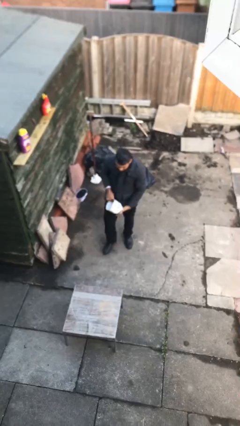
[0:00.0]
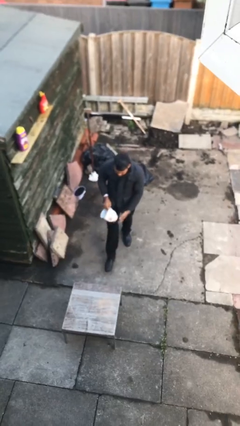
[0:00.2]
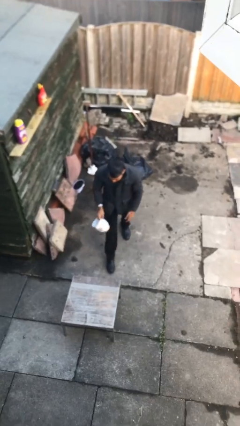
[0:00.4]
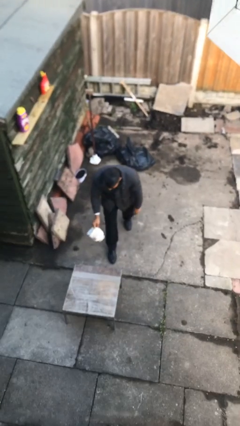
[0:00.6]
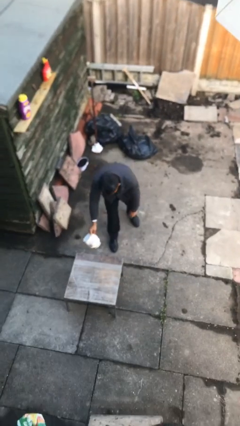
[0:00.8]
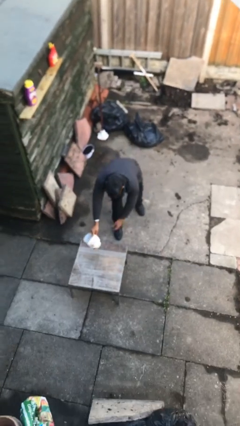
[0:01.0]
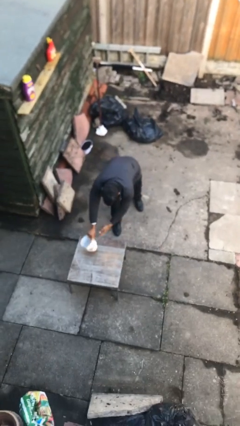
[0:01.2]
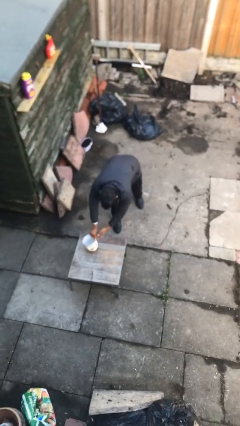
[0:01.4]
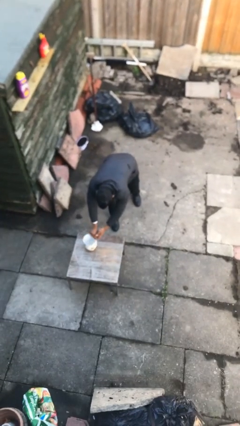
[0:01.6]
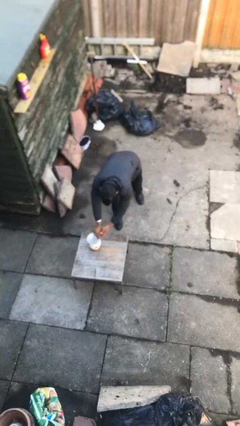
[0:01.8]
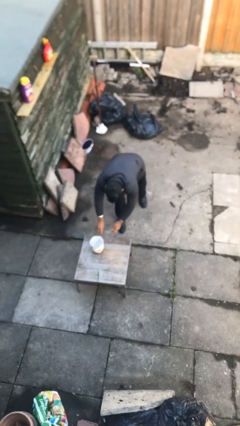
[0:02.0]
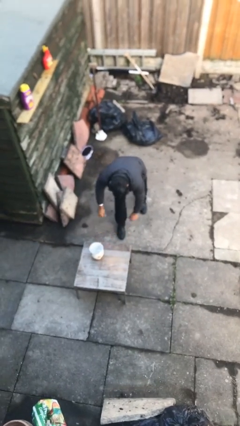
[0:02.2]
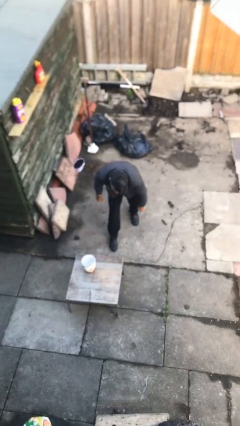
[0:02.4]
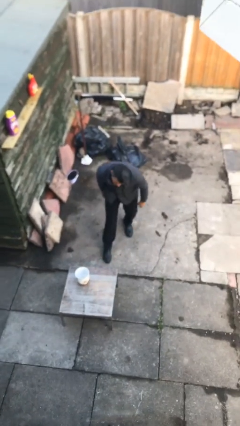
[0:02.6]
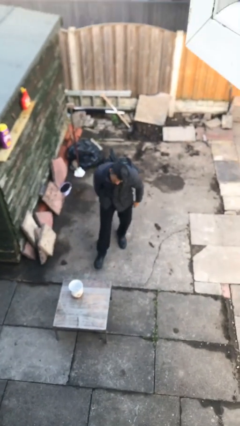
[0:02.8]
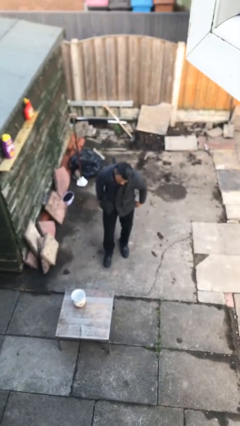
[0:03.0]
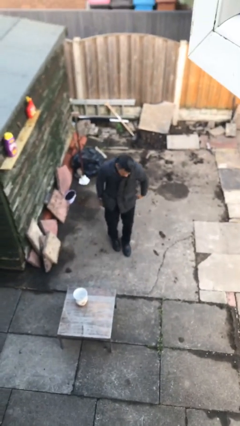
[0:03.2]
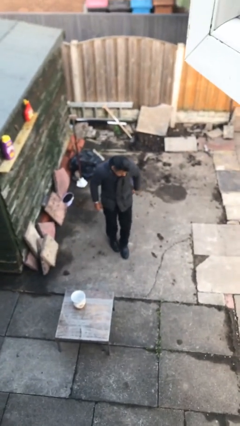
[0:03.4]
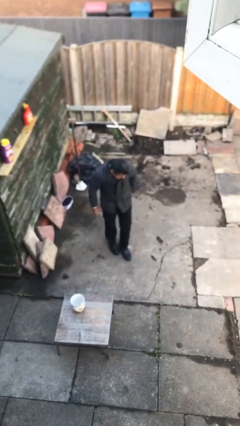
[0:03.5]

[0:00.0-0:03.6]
person puts down object on table

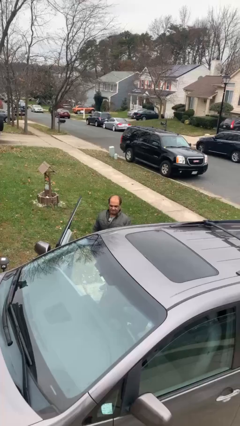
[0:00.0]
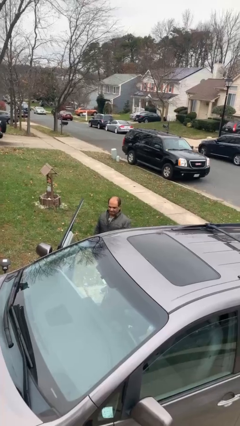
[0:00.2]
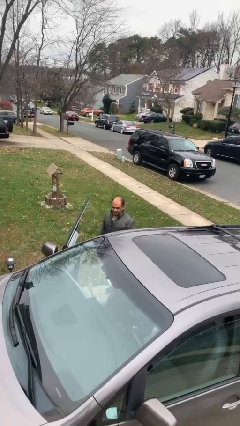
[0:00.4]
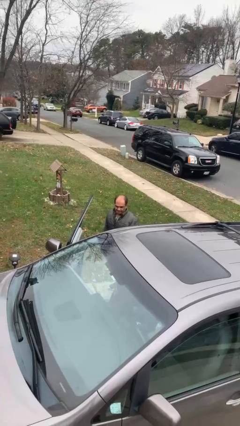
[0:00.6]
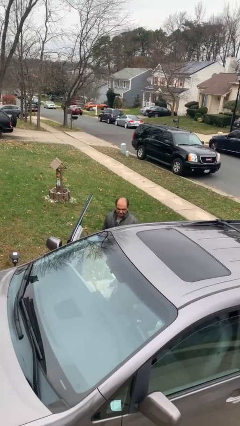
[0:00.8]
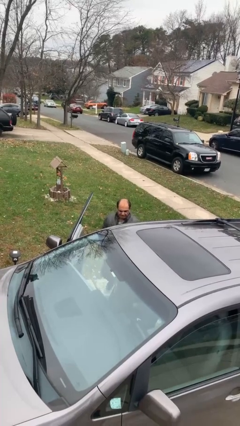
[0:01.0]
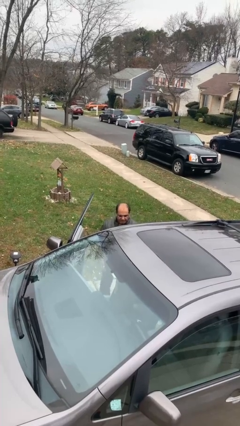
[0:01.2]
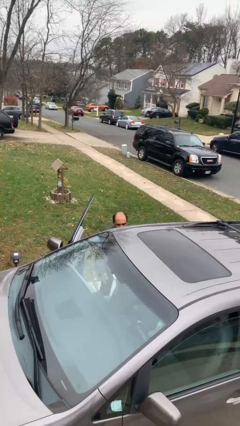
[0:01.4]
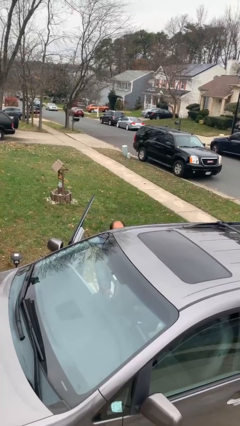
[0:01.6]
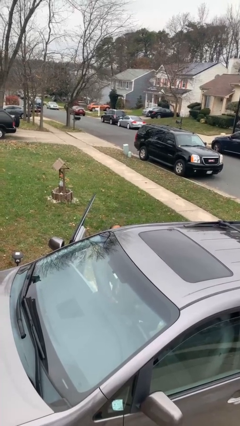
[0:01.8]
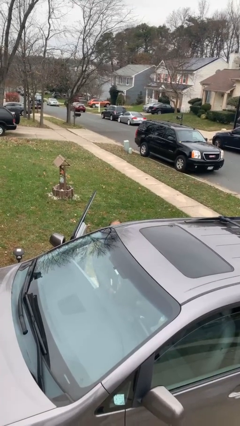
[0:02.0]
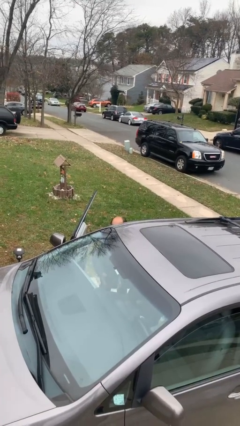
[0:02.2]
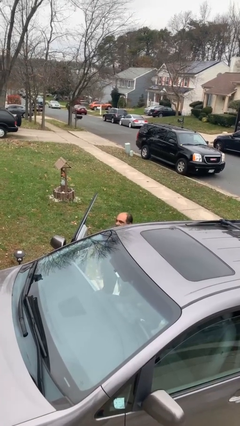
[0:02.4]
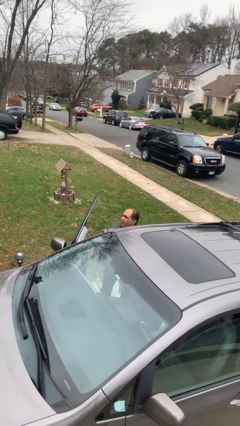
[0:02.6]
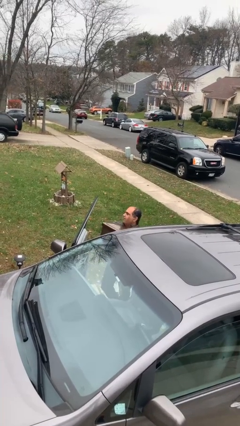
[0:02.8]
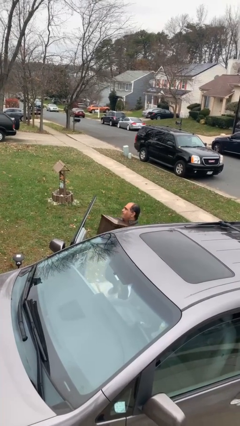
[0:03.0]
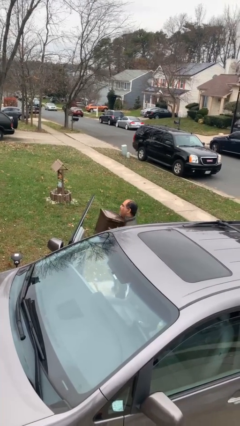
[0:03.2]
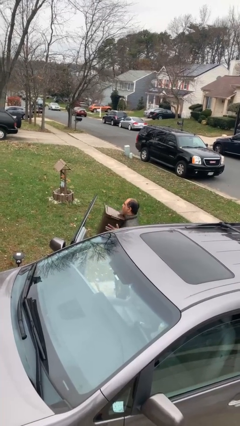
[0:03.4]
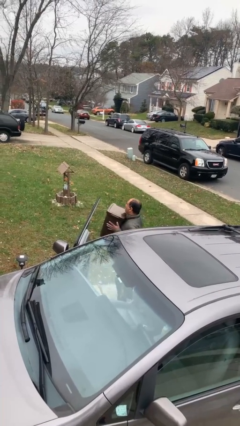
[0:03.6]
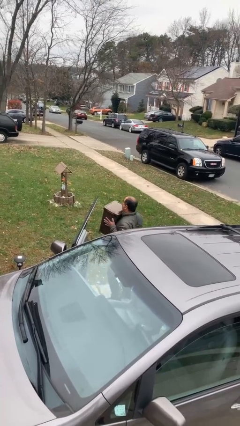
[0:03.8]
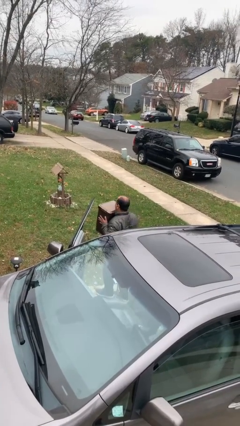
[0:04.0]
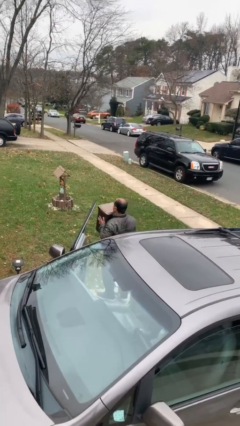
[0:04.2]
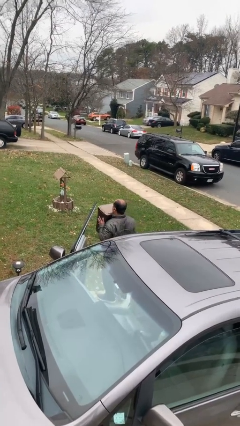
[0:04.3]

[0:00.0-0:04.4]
person unloads car

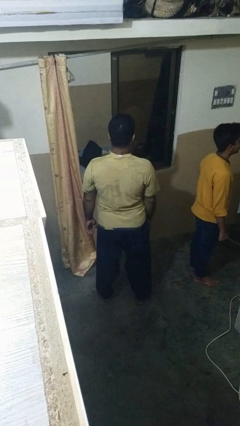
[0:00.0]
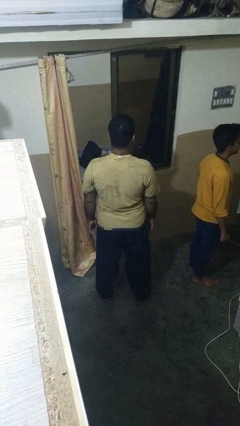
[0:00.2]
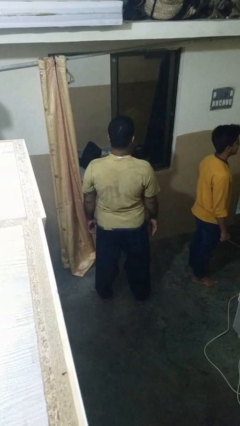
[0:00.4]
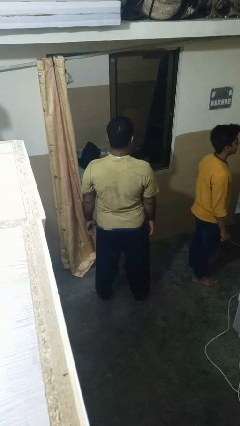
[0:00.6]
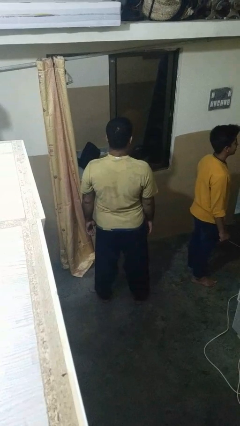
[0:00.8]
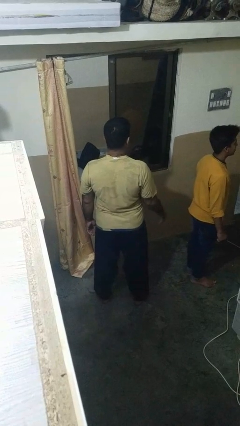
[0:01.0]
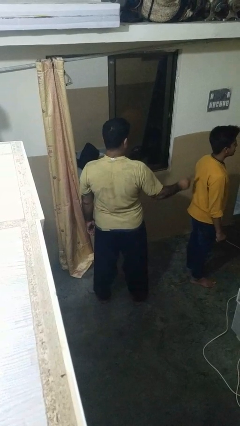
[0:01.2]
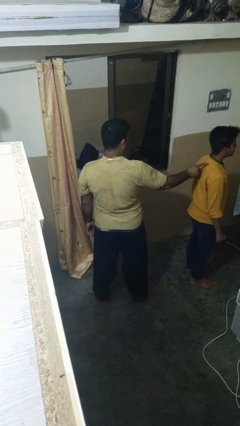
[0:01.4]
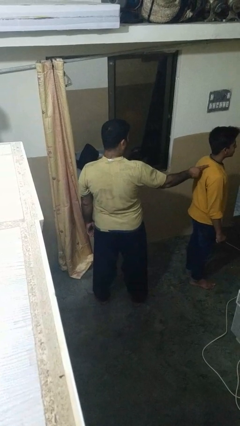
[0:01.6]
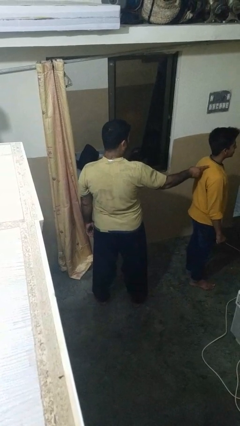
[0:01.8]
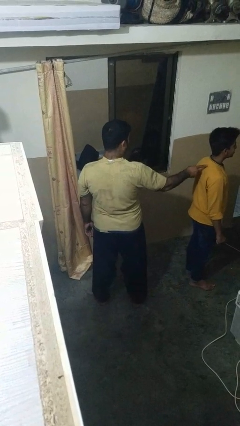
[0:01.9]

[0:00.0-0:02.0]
person points at person

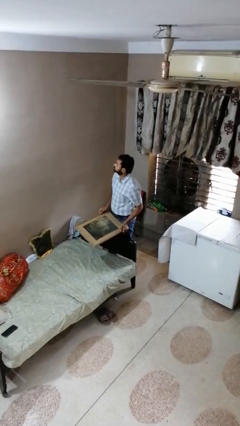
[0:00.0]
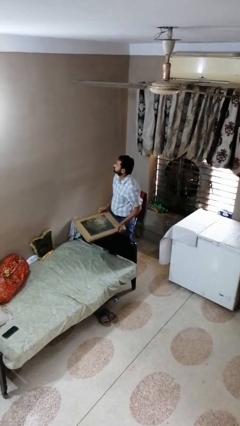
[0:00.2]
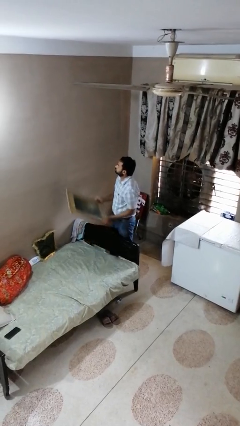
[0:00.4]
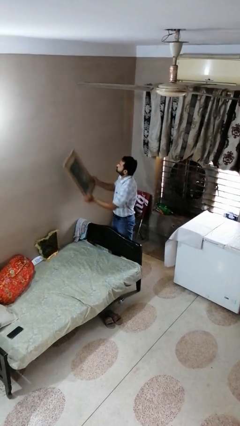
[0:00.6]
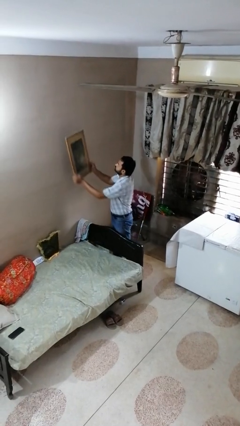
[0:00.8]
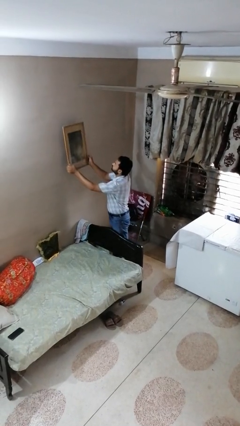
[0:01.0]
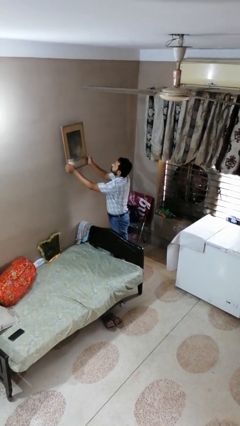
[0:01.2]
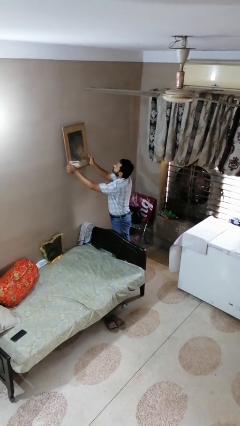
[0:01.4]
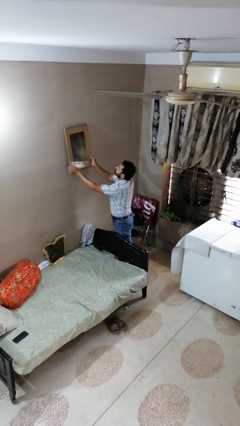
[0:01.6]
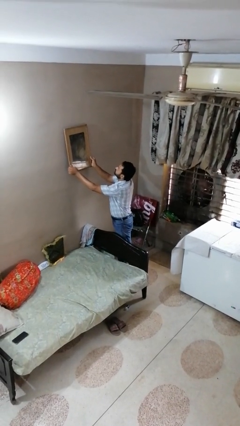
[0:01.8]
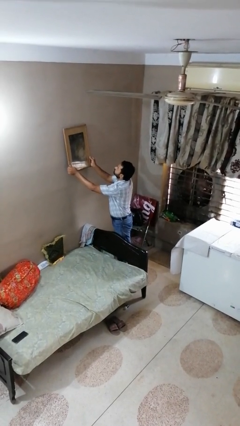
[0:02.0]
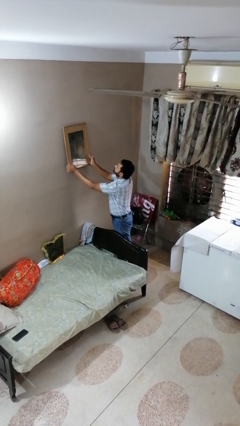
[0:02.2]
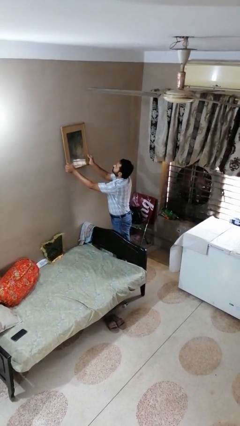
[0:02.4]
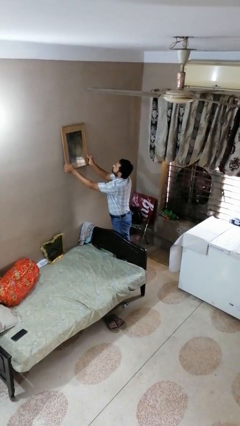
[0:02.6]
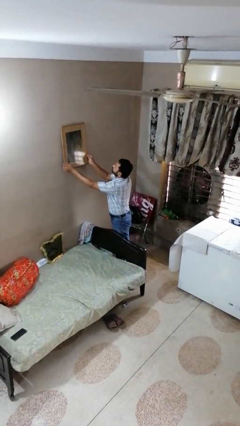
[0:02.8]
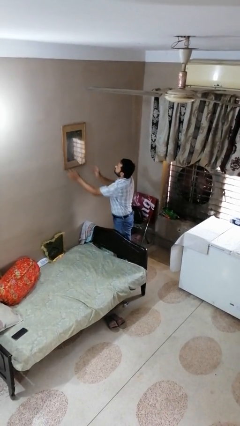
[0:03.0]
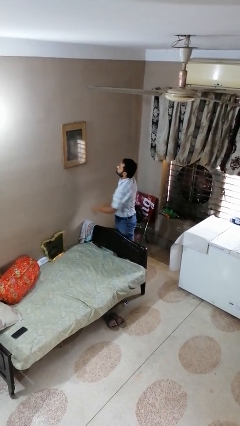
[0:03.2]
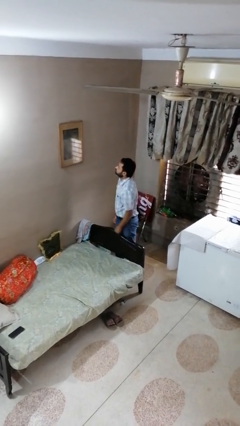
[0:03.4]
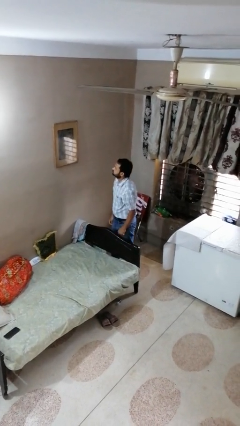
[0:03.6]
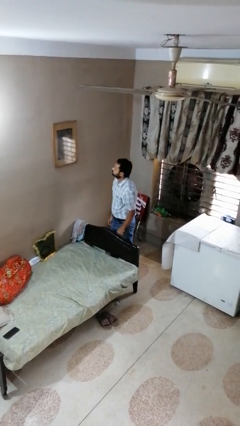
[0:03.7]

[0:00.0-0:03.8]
person puts up picture frame

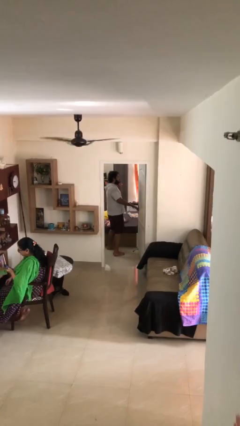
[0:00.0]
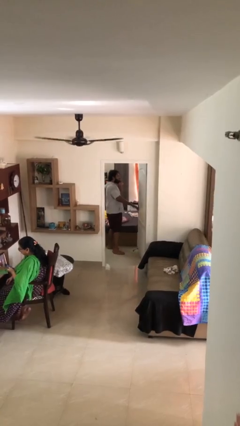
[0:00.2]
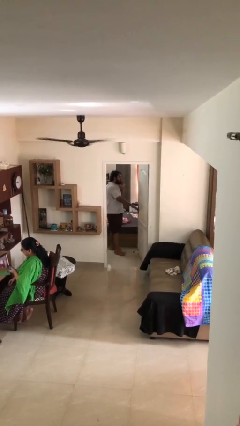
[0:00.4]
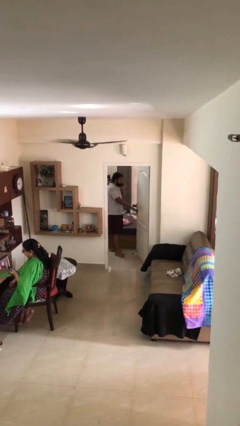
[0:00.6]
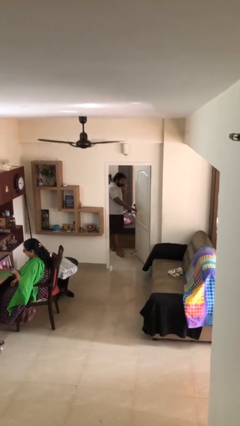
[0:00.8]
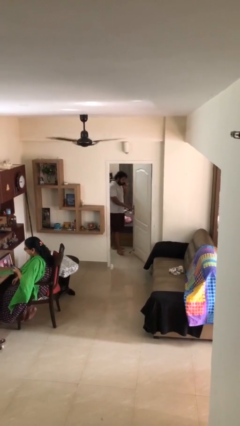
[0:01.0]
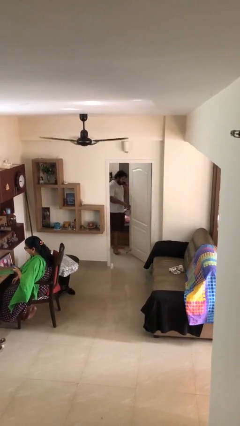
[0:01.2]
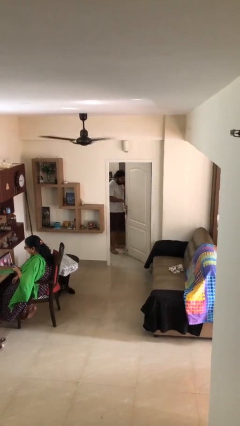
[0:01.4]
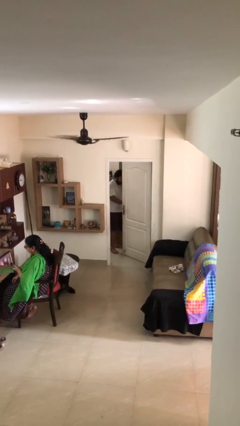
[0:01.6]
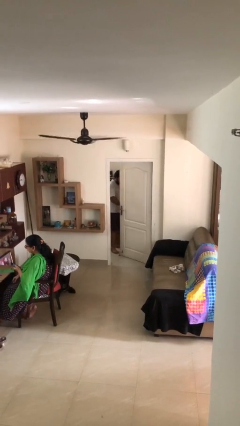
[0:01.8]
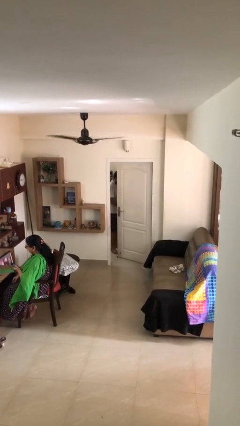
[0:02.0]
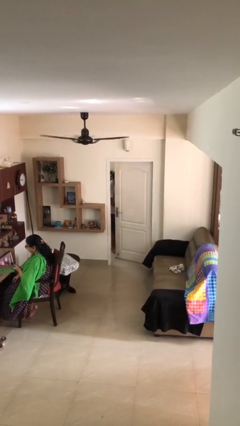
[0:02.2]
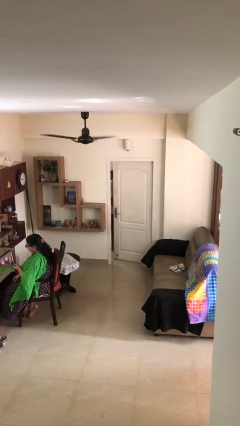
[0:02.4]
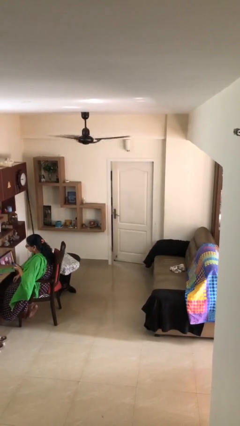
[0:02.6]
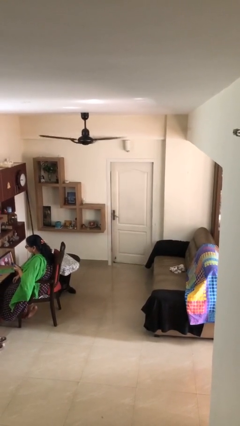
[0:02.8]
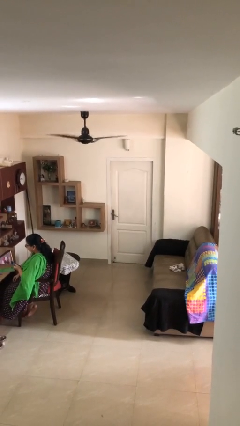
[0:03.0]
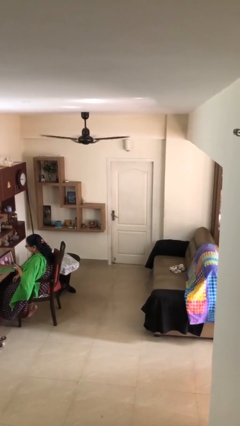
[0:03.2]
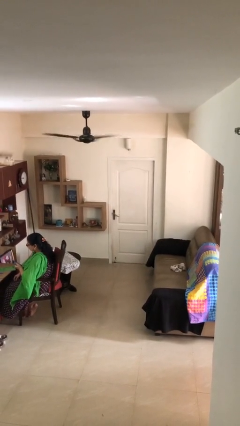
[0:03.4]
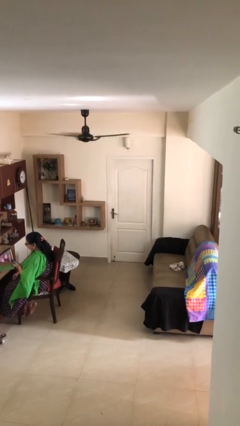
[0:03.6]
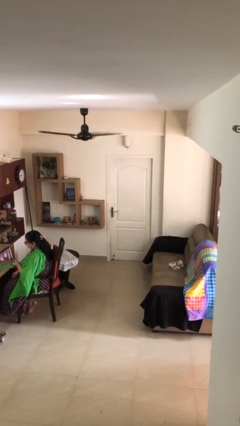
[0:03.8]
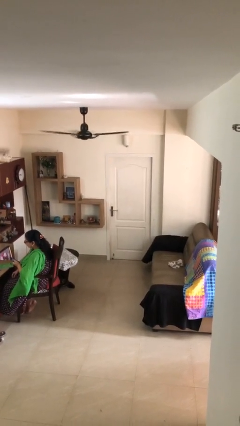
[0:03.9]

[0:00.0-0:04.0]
person closes facility door
